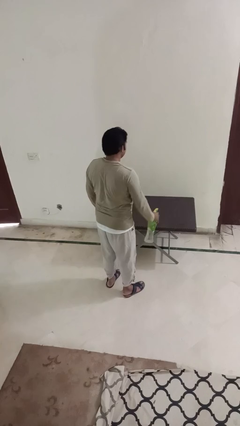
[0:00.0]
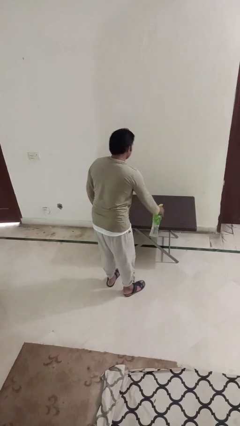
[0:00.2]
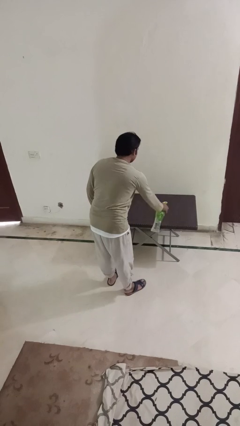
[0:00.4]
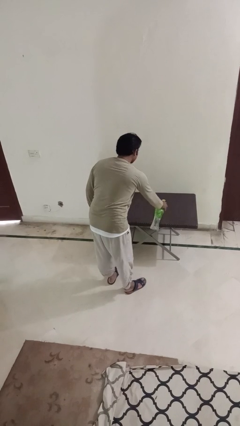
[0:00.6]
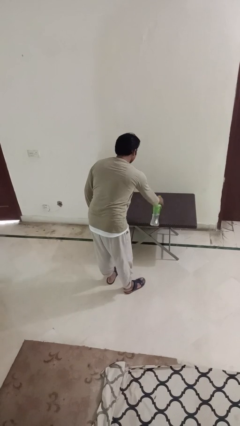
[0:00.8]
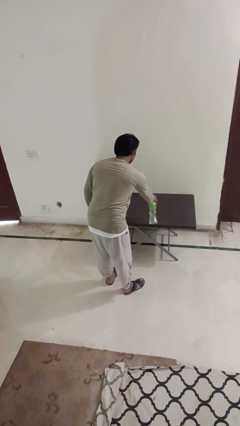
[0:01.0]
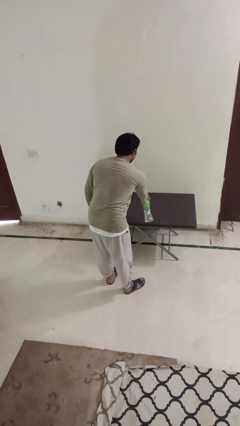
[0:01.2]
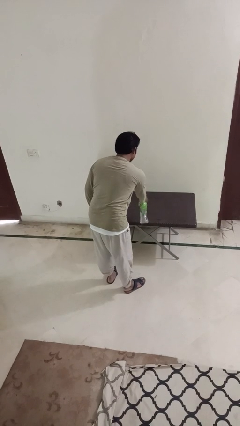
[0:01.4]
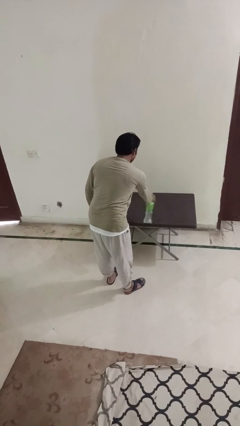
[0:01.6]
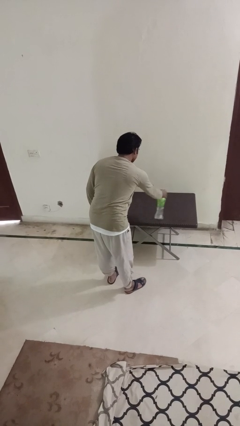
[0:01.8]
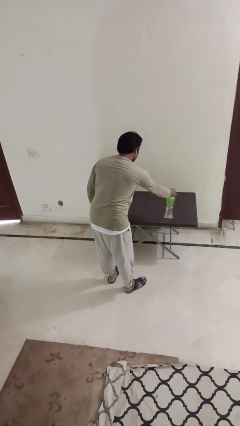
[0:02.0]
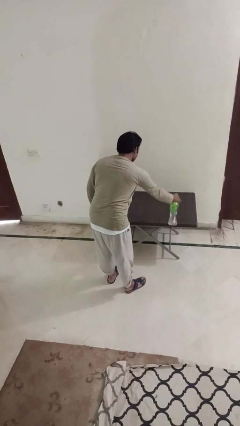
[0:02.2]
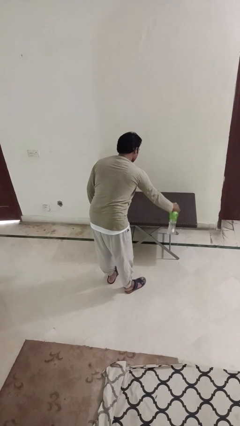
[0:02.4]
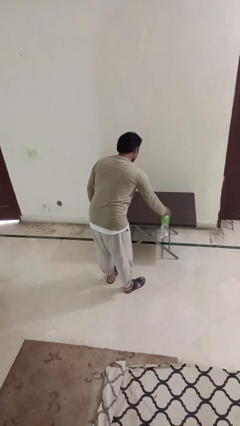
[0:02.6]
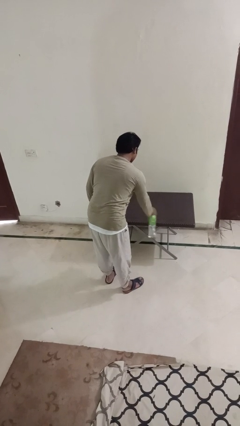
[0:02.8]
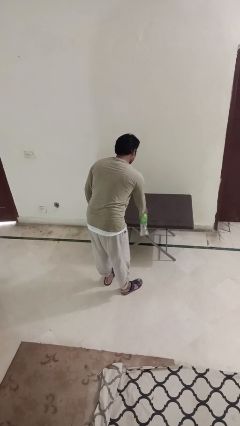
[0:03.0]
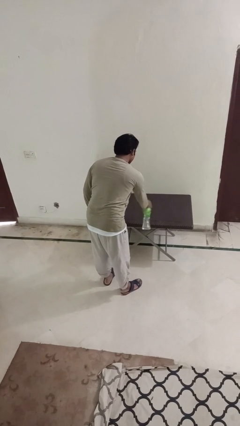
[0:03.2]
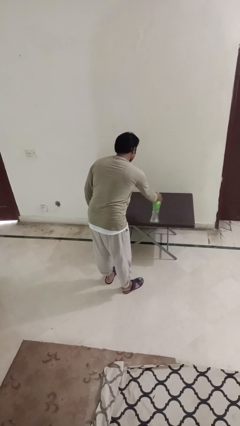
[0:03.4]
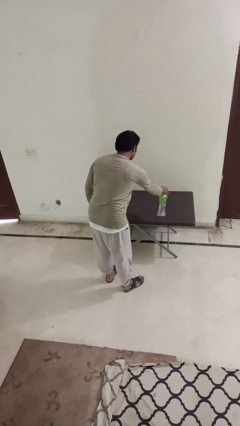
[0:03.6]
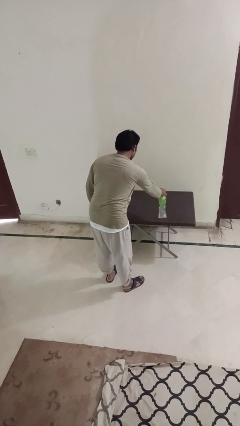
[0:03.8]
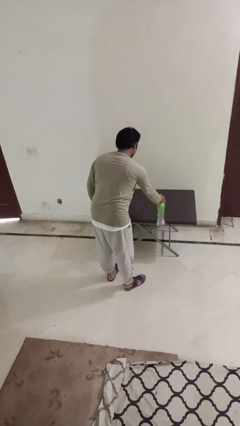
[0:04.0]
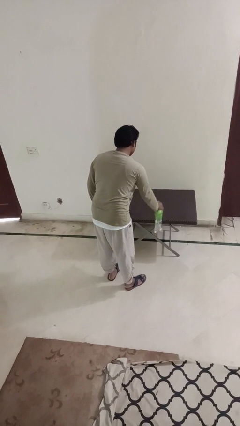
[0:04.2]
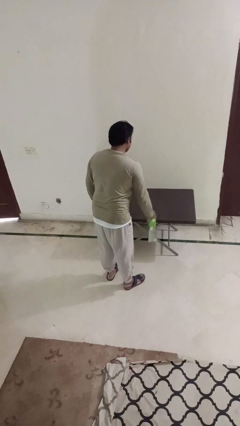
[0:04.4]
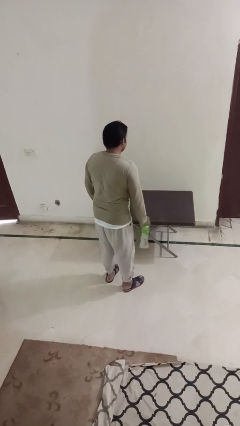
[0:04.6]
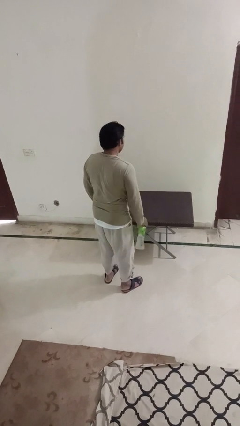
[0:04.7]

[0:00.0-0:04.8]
person sprays from bottle

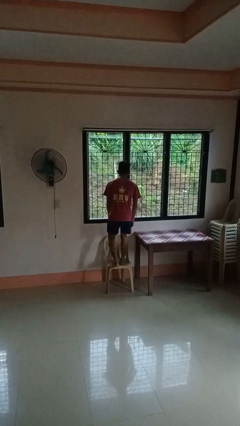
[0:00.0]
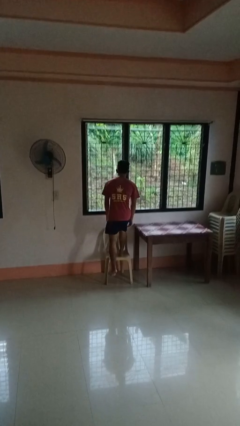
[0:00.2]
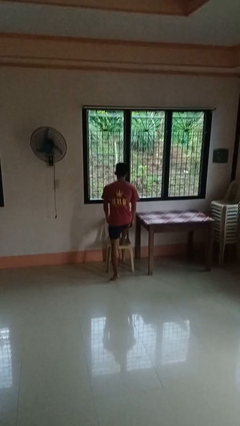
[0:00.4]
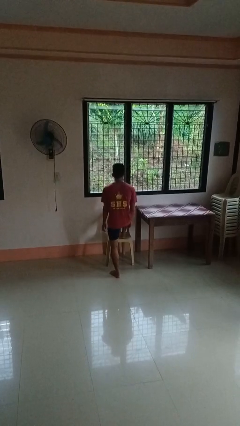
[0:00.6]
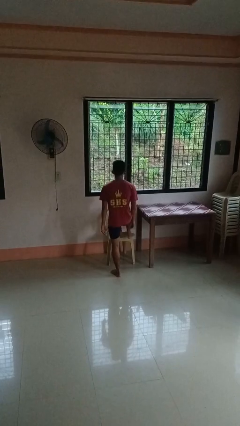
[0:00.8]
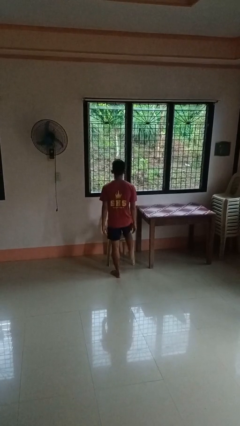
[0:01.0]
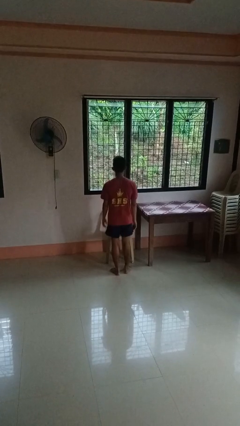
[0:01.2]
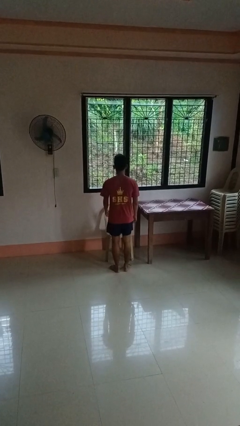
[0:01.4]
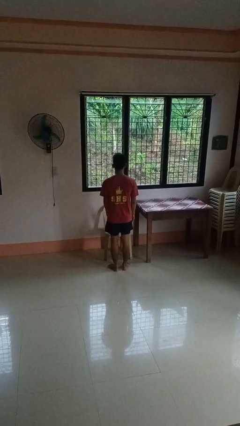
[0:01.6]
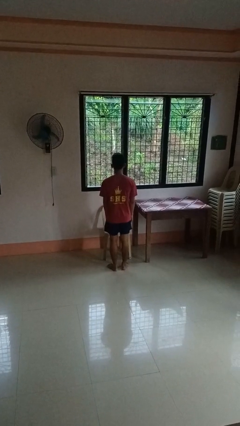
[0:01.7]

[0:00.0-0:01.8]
person climbs off chair

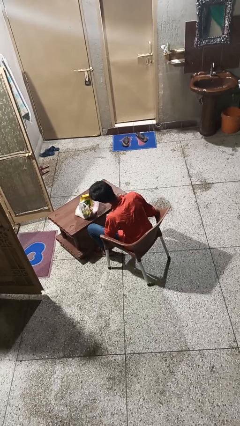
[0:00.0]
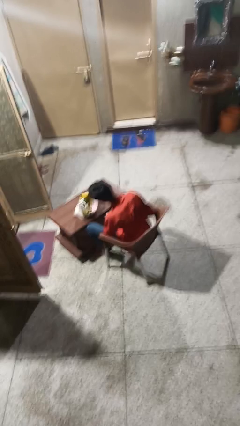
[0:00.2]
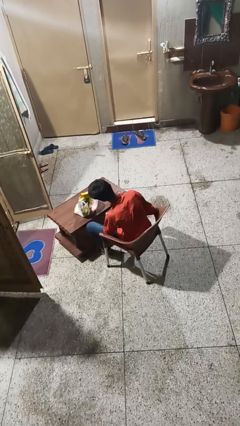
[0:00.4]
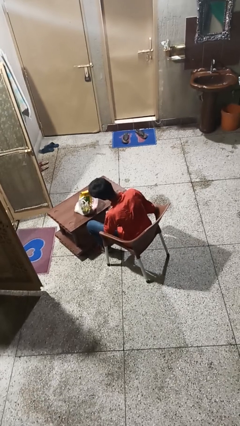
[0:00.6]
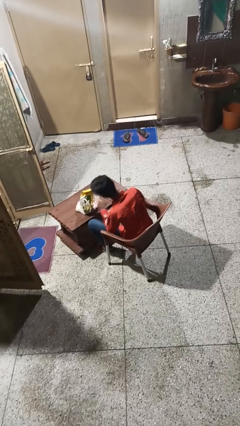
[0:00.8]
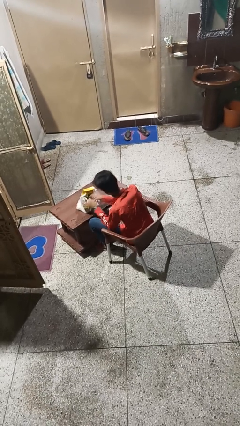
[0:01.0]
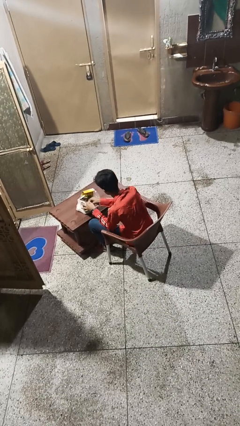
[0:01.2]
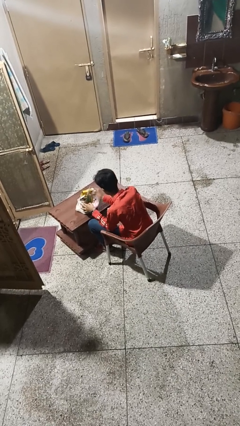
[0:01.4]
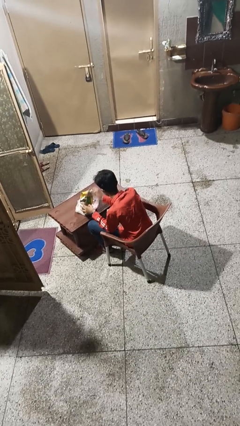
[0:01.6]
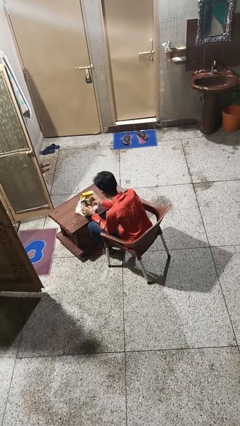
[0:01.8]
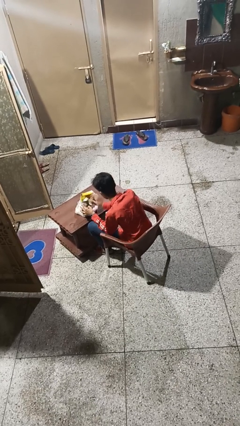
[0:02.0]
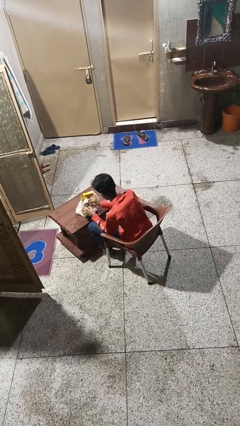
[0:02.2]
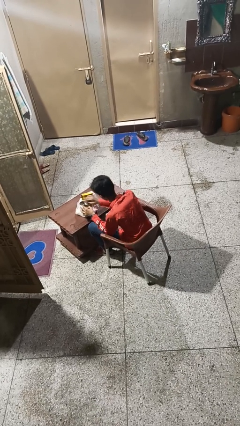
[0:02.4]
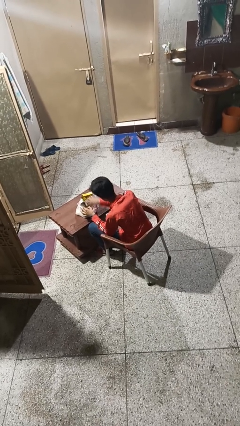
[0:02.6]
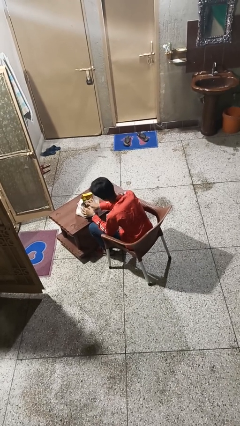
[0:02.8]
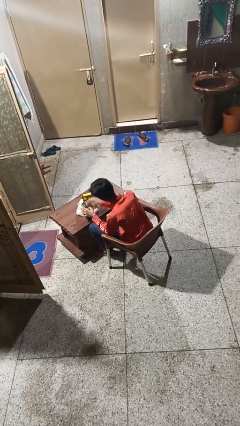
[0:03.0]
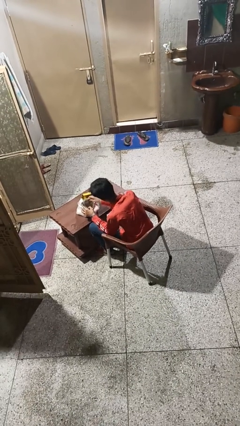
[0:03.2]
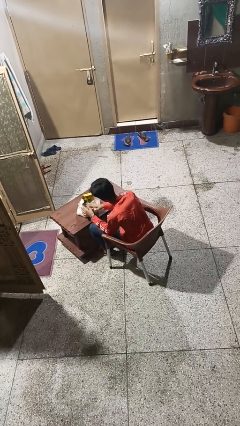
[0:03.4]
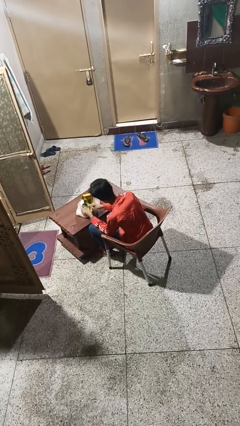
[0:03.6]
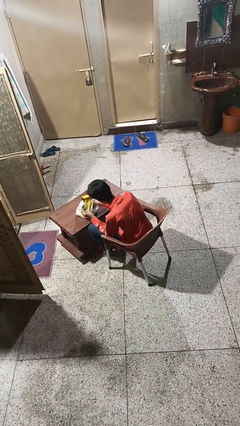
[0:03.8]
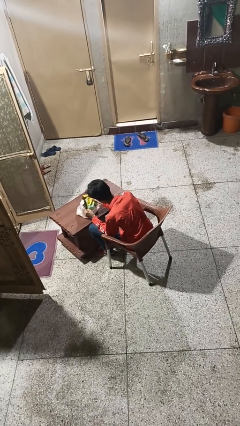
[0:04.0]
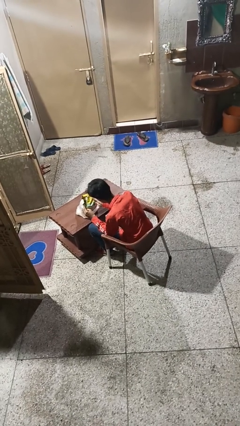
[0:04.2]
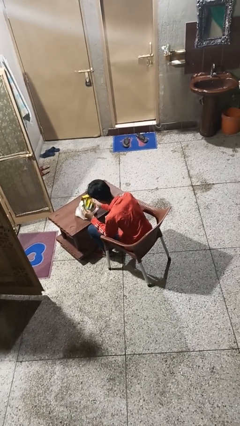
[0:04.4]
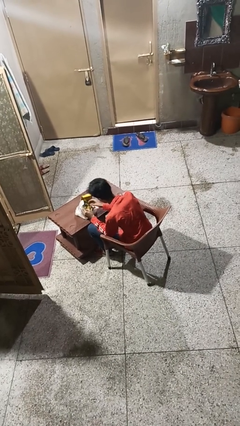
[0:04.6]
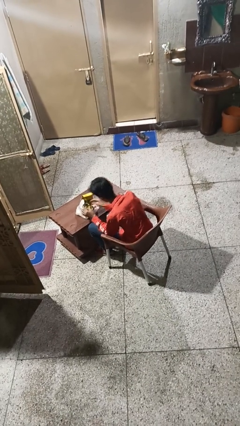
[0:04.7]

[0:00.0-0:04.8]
person searches in bag

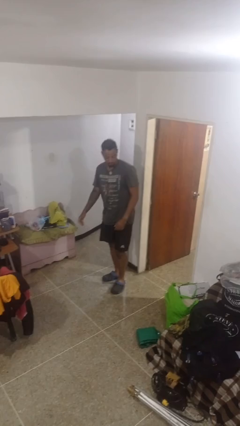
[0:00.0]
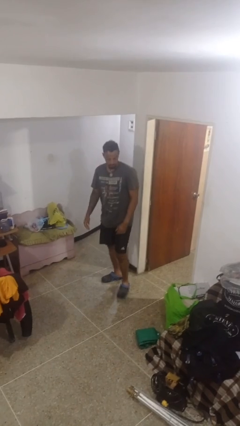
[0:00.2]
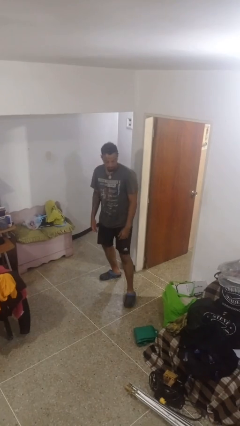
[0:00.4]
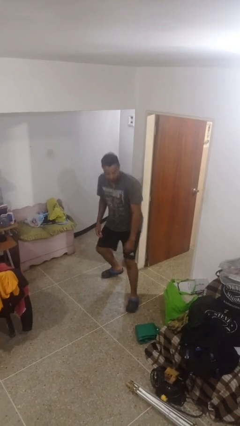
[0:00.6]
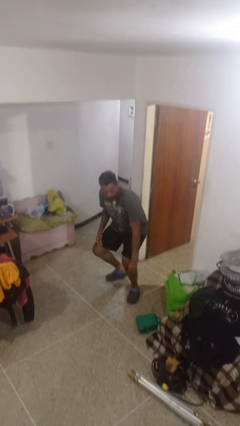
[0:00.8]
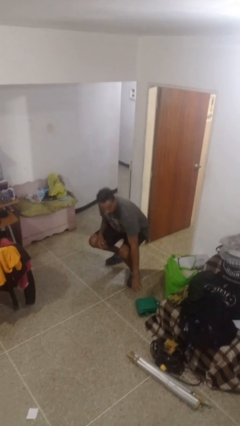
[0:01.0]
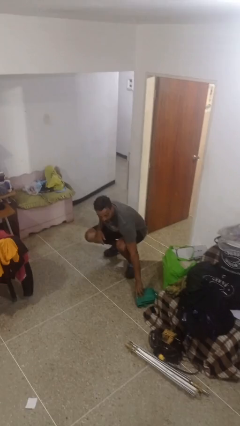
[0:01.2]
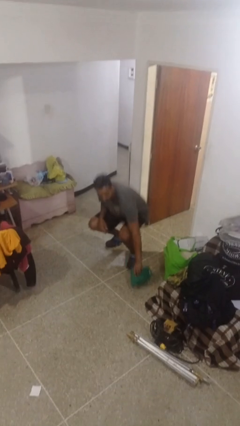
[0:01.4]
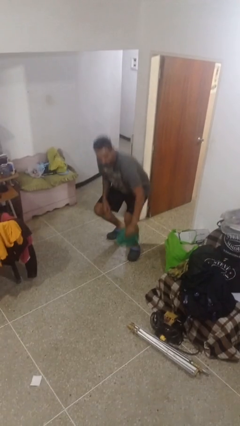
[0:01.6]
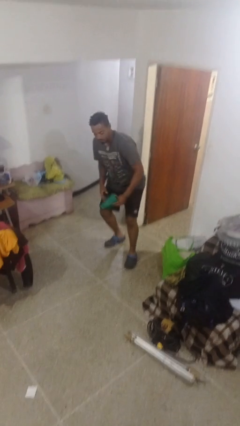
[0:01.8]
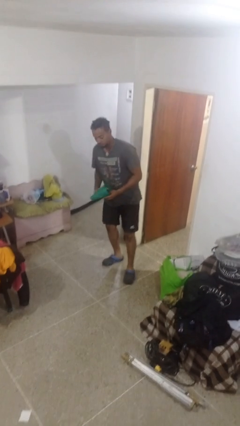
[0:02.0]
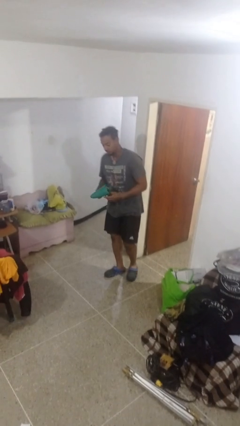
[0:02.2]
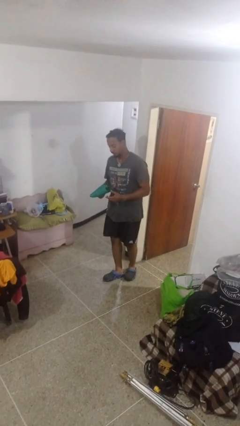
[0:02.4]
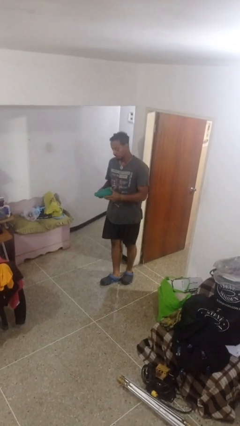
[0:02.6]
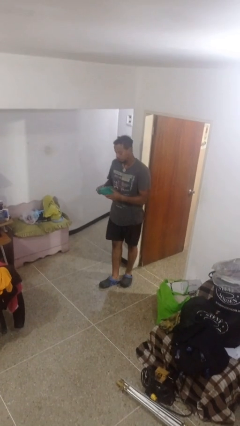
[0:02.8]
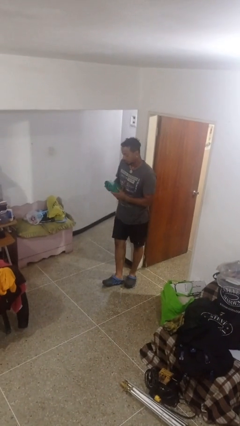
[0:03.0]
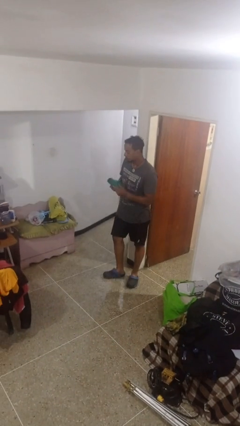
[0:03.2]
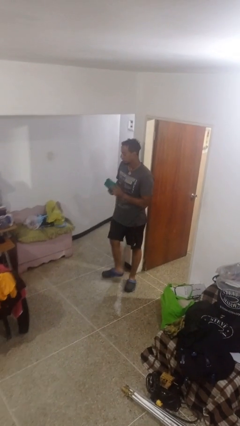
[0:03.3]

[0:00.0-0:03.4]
person picks up object from floor

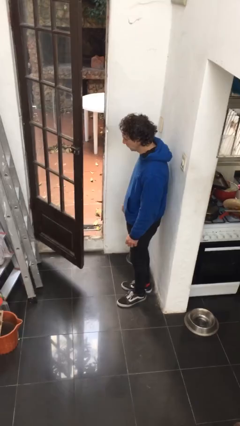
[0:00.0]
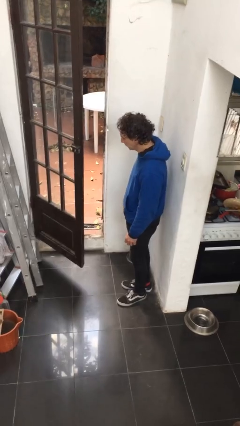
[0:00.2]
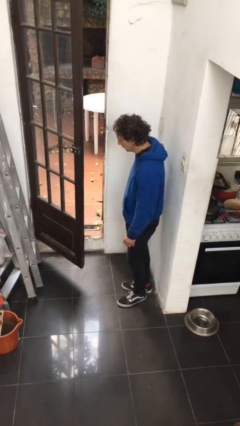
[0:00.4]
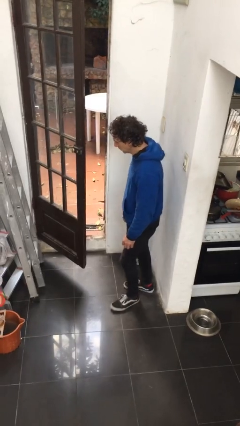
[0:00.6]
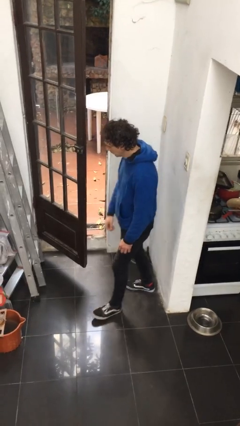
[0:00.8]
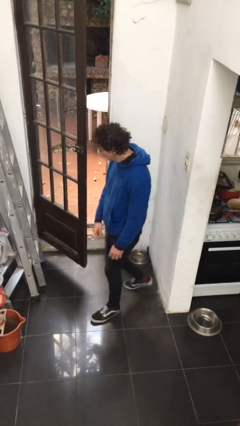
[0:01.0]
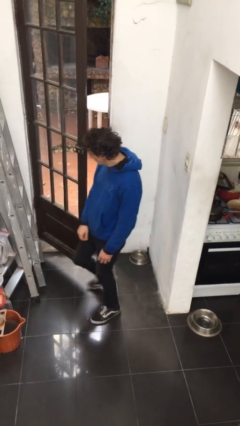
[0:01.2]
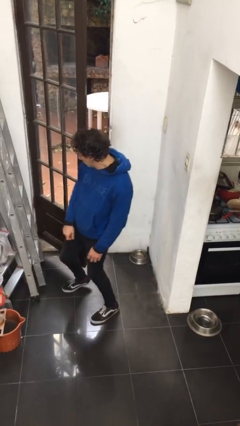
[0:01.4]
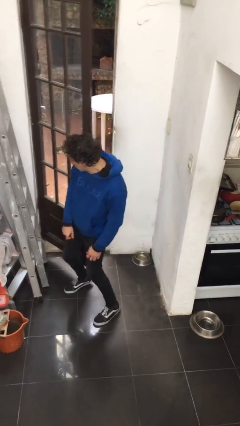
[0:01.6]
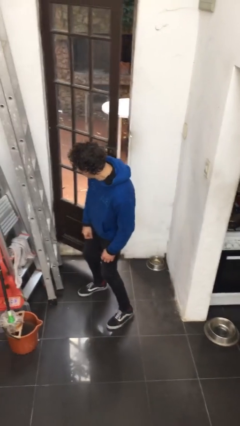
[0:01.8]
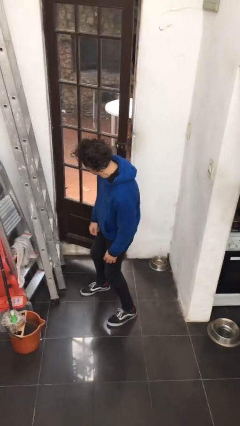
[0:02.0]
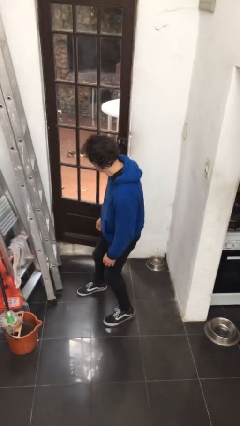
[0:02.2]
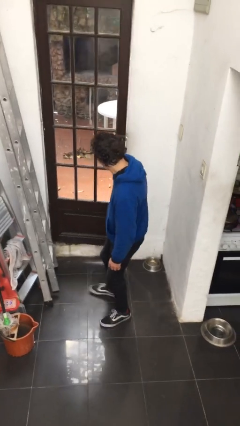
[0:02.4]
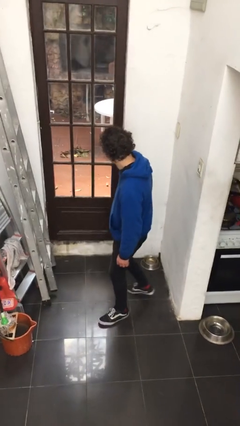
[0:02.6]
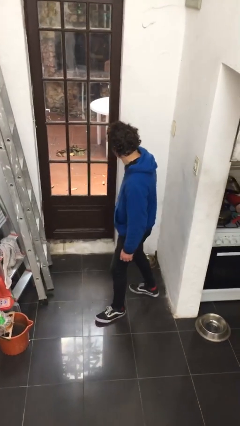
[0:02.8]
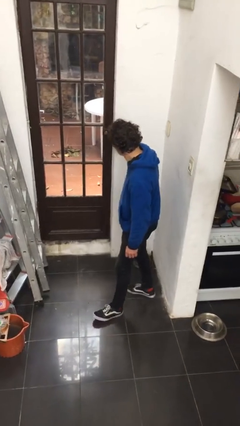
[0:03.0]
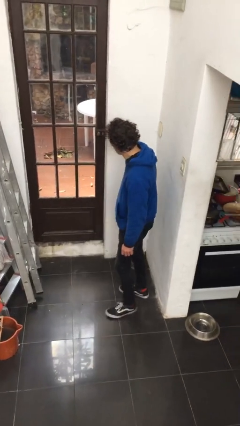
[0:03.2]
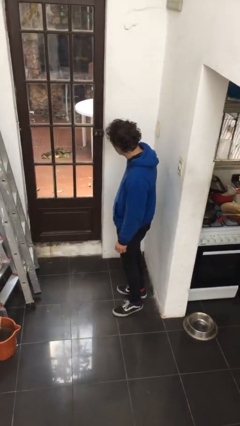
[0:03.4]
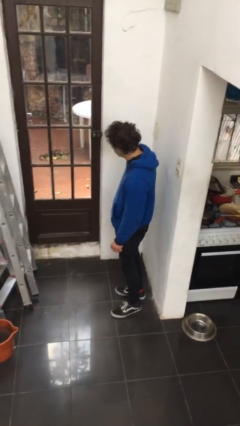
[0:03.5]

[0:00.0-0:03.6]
person closes door with hip
